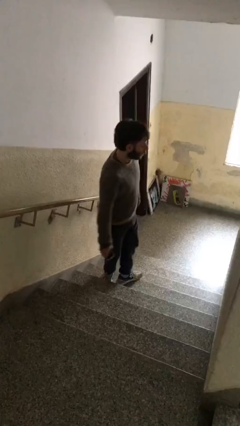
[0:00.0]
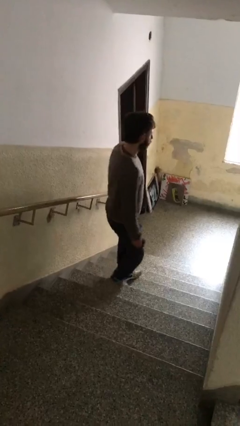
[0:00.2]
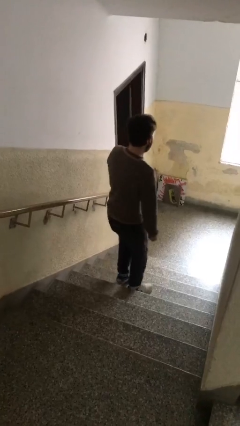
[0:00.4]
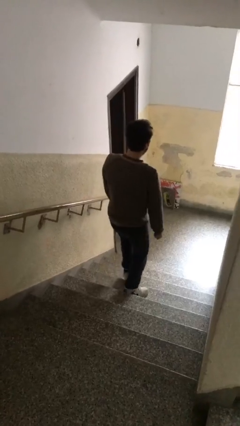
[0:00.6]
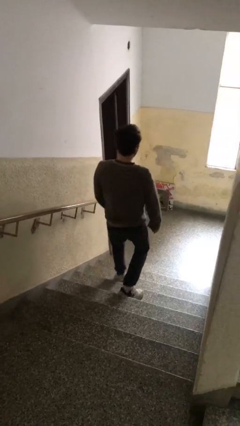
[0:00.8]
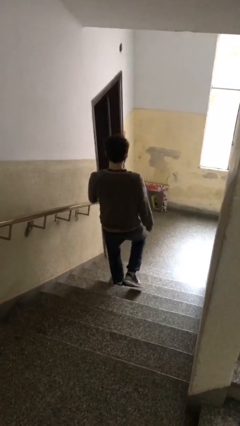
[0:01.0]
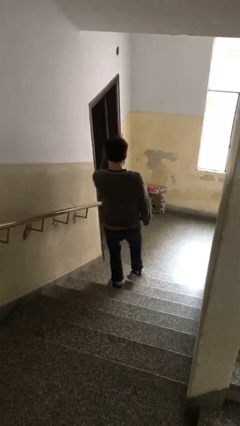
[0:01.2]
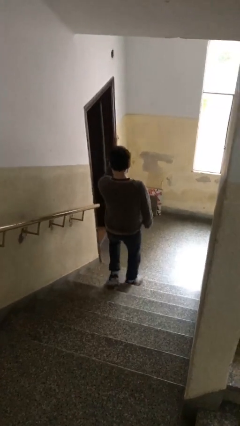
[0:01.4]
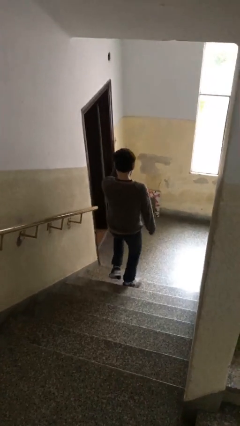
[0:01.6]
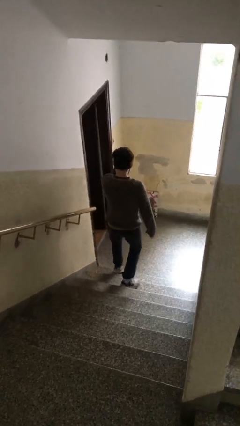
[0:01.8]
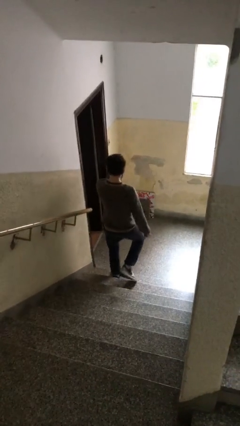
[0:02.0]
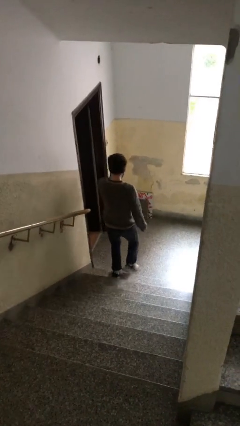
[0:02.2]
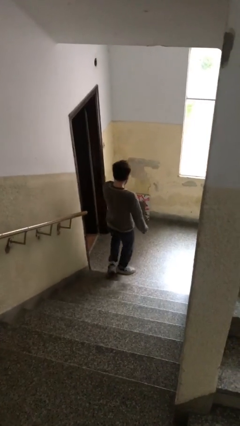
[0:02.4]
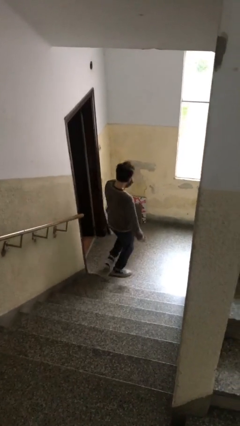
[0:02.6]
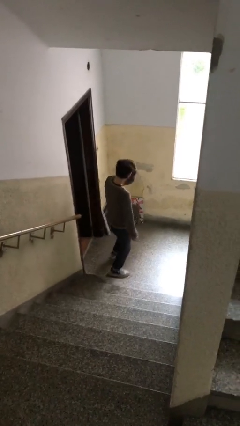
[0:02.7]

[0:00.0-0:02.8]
person climbs down stairs

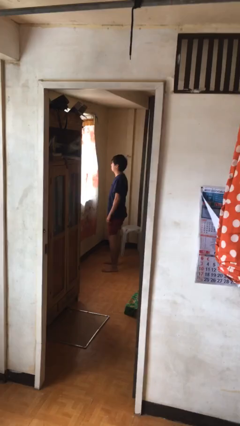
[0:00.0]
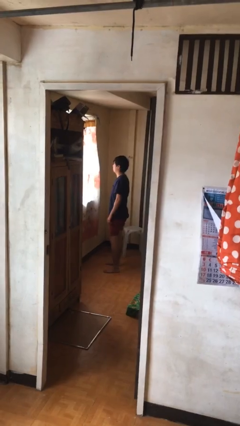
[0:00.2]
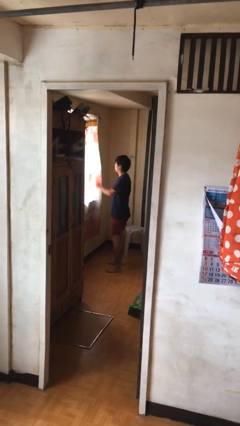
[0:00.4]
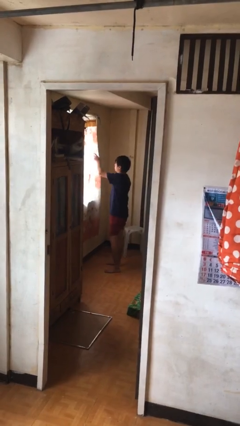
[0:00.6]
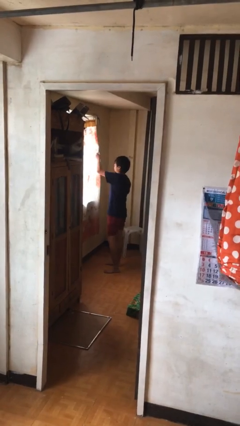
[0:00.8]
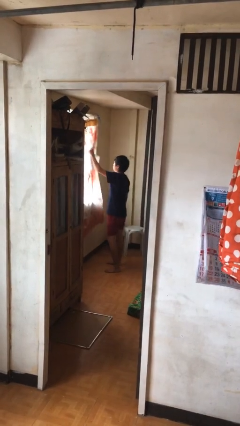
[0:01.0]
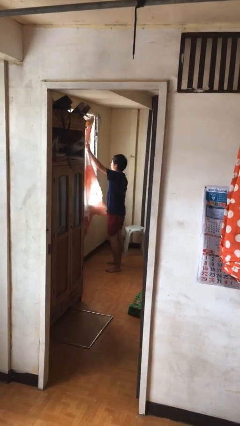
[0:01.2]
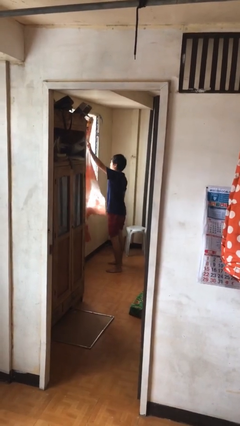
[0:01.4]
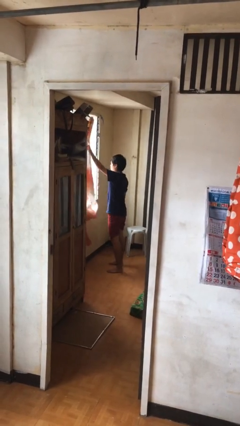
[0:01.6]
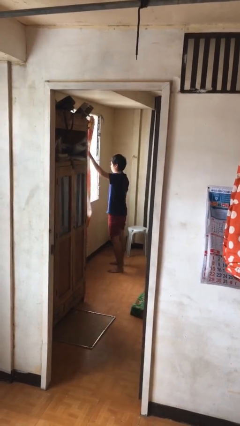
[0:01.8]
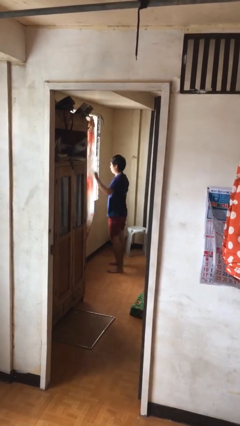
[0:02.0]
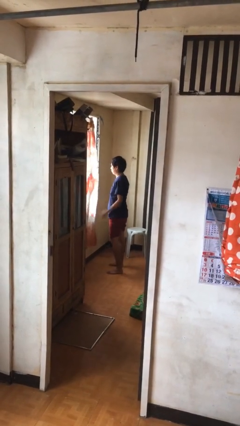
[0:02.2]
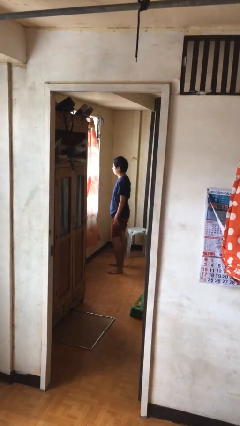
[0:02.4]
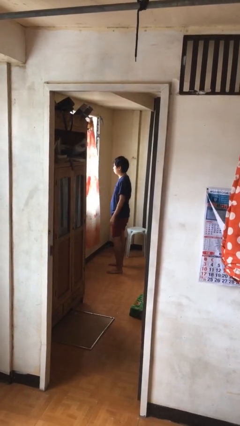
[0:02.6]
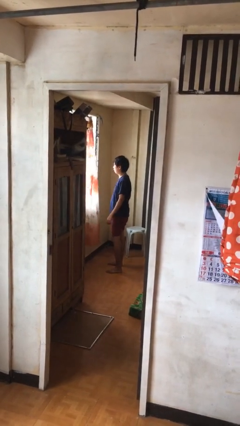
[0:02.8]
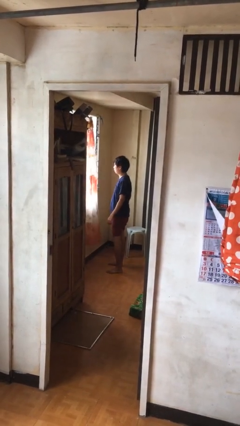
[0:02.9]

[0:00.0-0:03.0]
person opens curtains

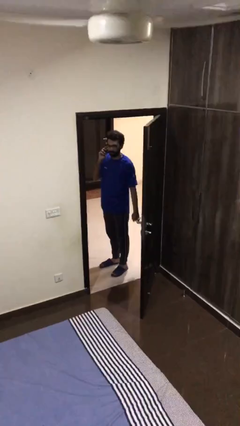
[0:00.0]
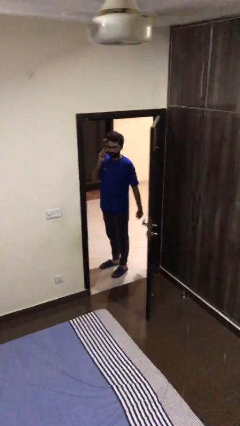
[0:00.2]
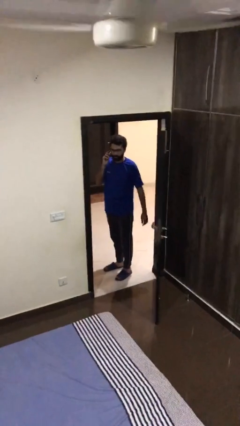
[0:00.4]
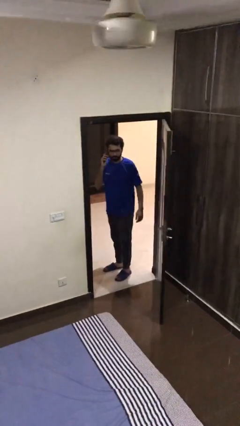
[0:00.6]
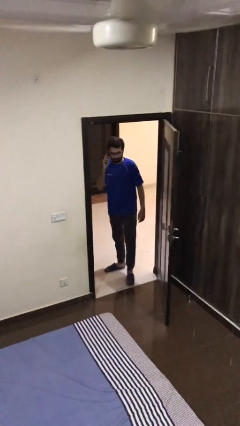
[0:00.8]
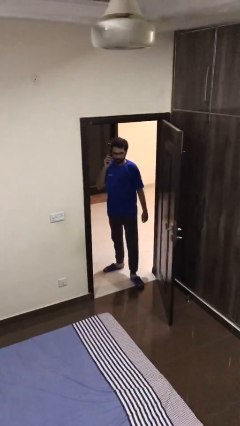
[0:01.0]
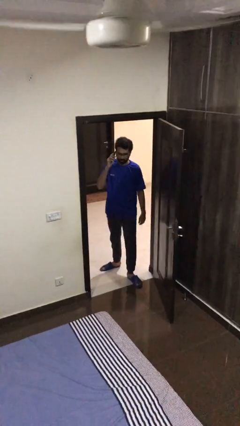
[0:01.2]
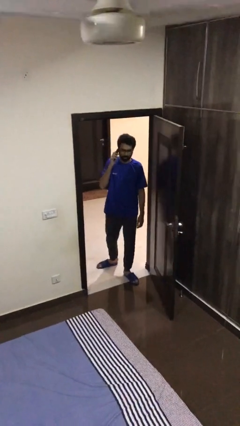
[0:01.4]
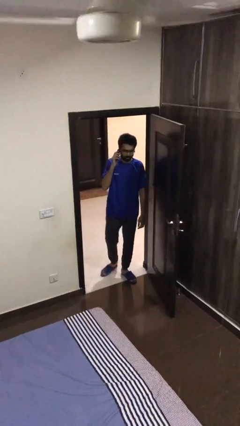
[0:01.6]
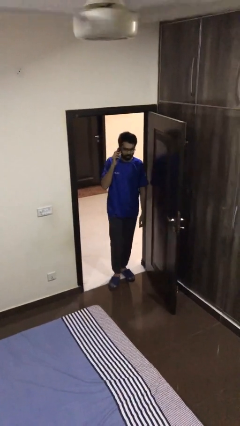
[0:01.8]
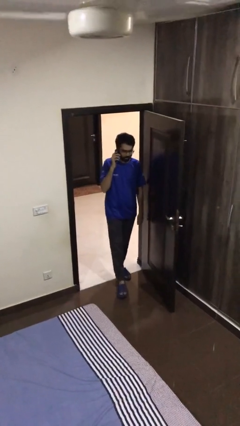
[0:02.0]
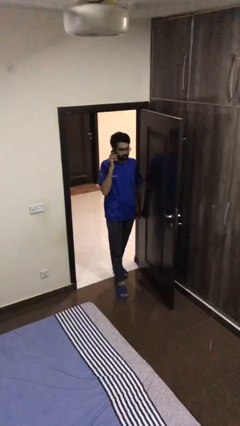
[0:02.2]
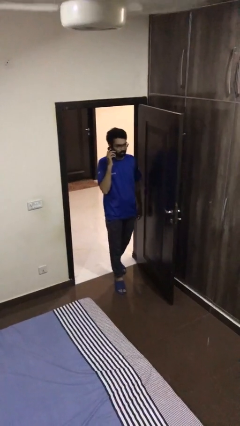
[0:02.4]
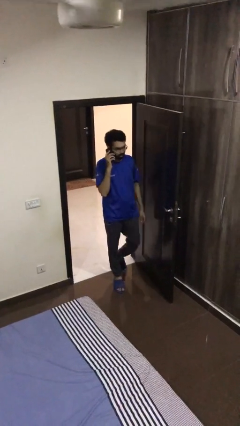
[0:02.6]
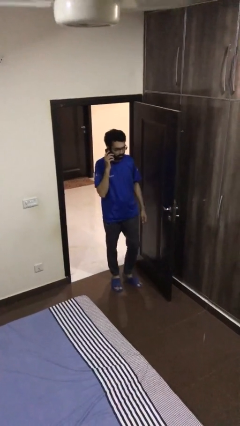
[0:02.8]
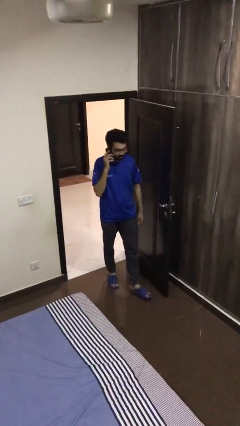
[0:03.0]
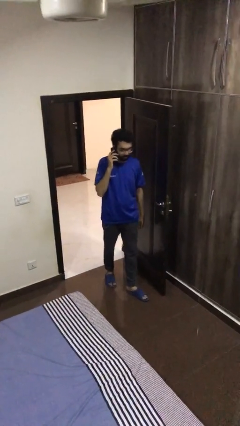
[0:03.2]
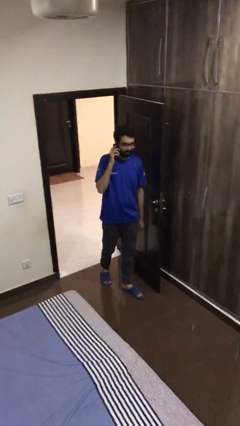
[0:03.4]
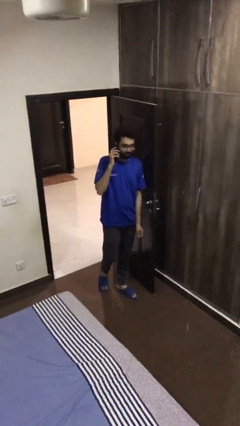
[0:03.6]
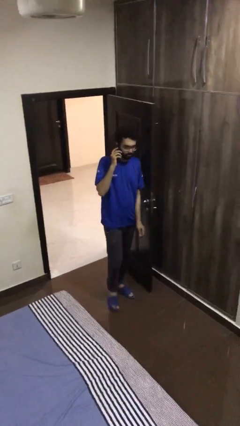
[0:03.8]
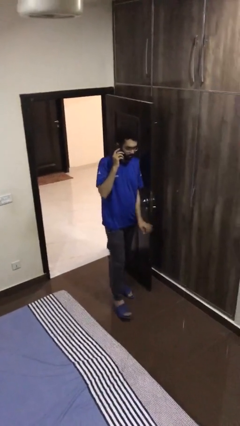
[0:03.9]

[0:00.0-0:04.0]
person enters scene through structure

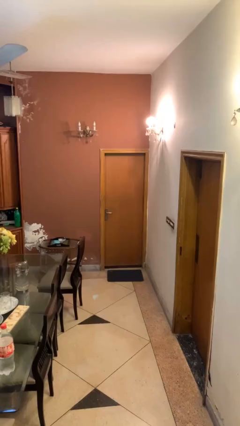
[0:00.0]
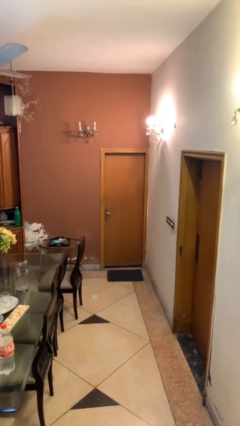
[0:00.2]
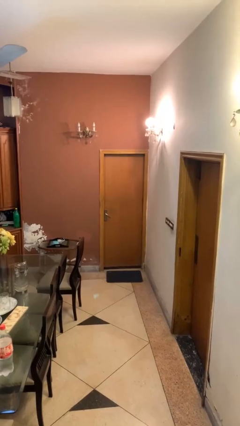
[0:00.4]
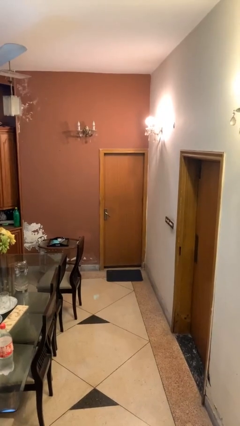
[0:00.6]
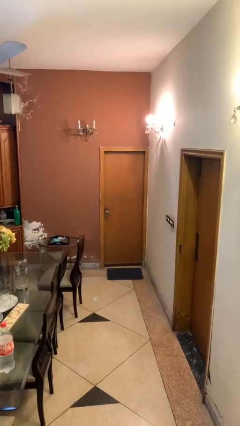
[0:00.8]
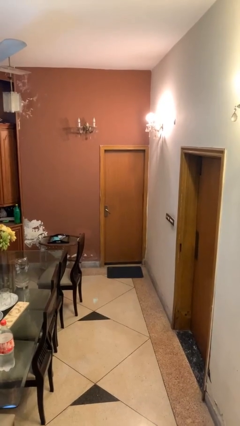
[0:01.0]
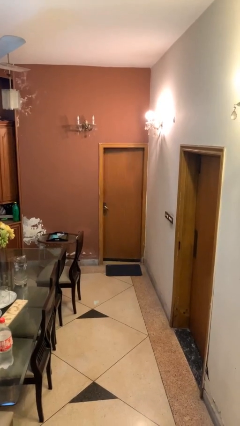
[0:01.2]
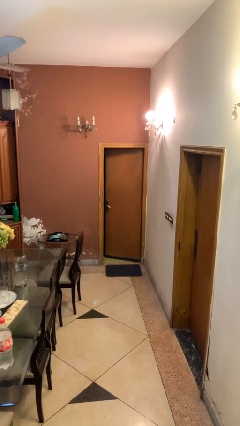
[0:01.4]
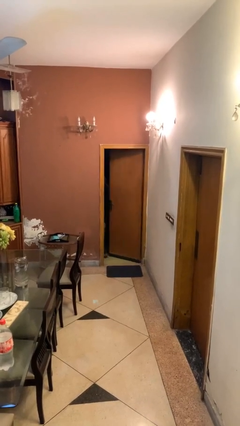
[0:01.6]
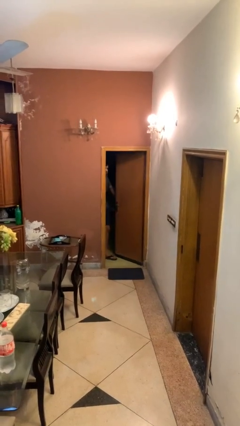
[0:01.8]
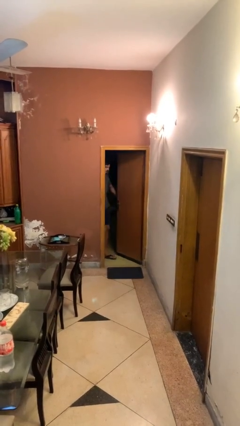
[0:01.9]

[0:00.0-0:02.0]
person opens facility door

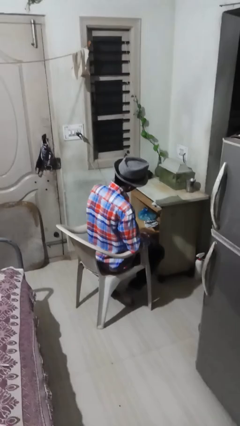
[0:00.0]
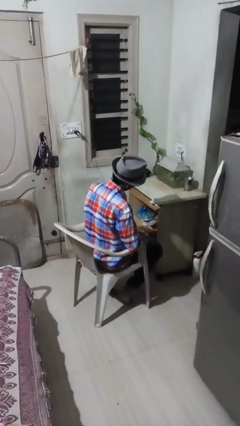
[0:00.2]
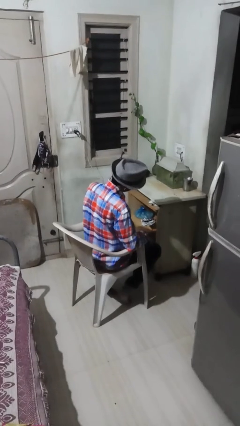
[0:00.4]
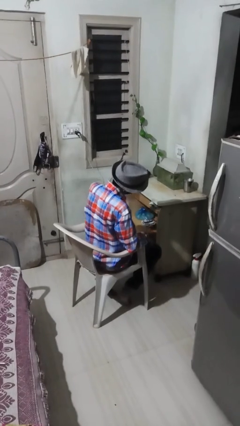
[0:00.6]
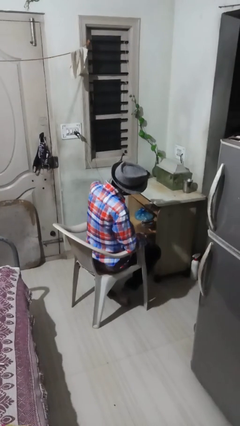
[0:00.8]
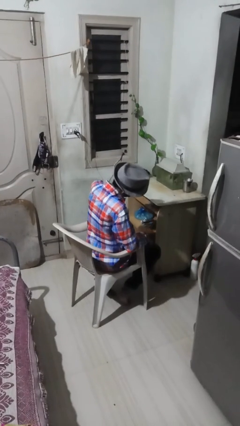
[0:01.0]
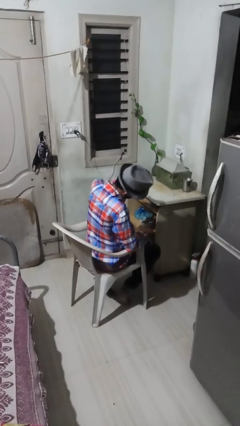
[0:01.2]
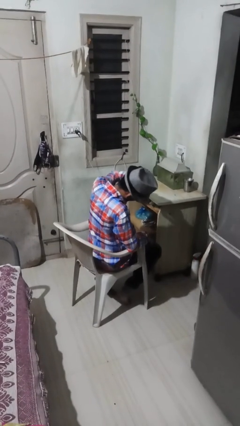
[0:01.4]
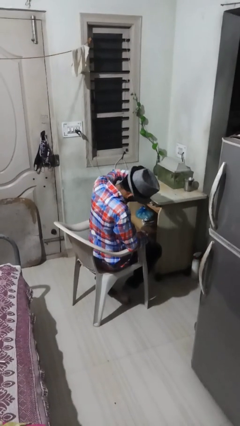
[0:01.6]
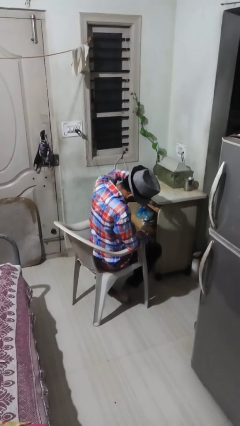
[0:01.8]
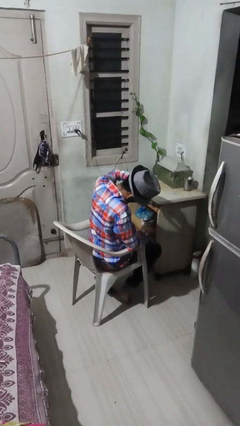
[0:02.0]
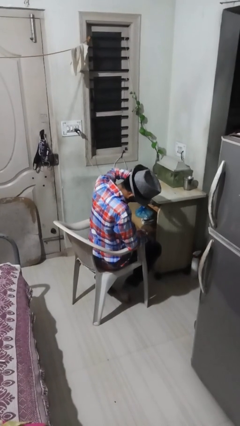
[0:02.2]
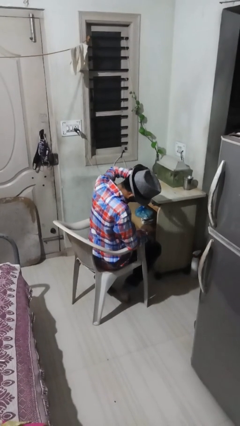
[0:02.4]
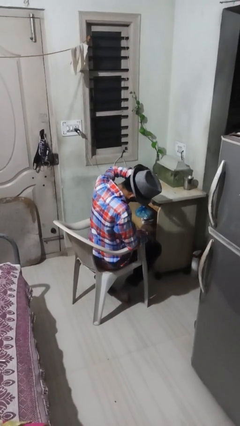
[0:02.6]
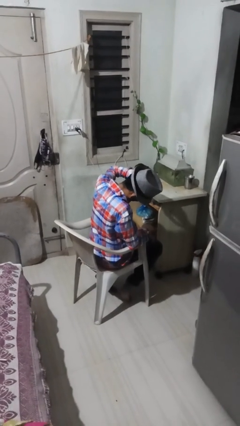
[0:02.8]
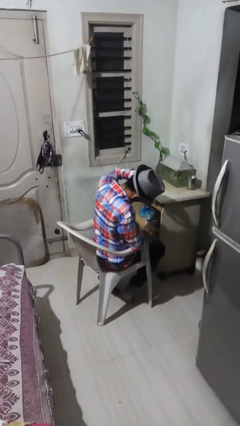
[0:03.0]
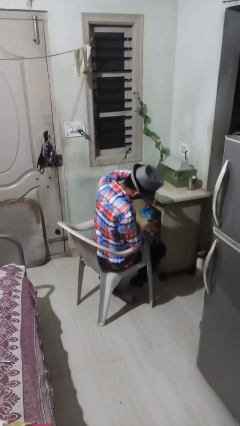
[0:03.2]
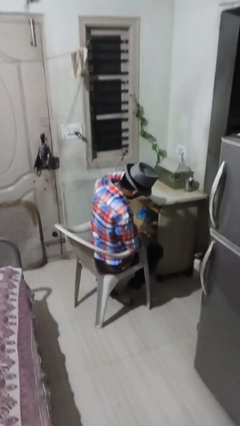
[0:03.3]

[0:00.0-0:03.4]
person puts fingers in ear

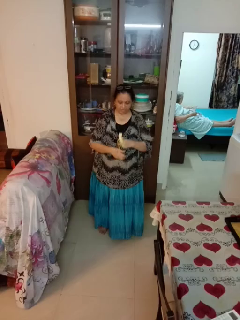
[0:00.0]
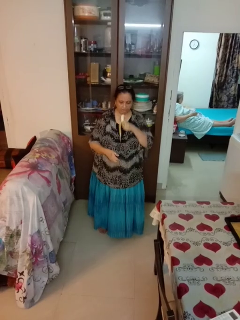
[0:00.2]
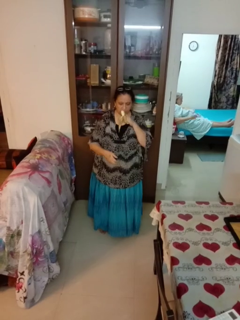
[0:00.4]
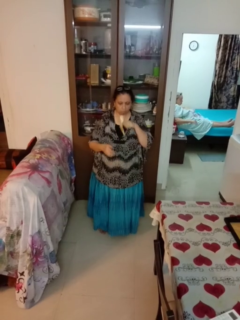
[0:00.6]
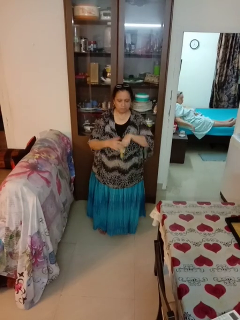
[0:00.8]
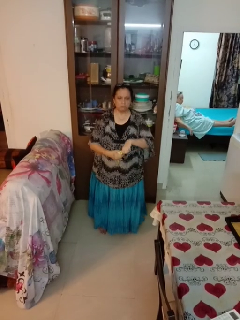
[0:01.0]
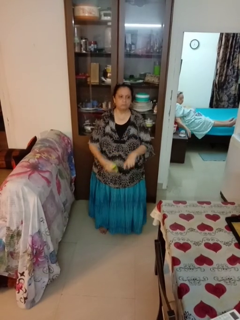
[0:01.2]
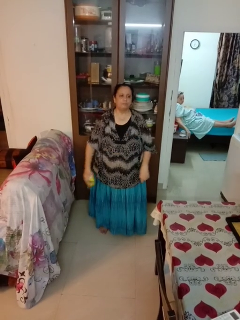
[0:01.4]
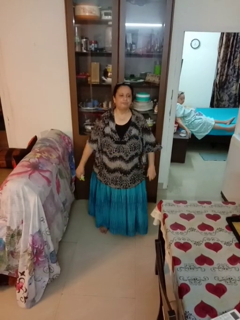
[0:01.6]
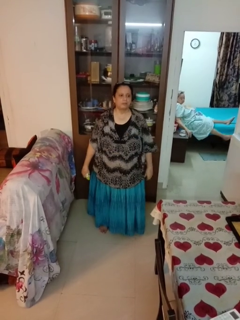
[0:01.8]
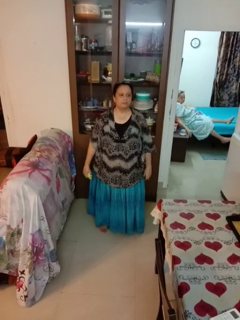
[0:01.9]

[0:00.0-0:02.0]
person eats banana

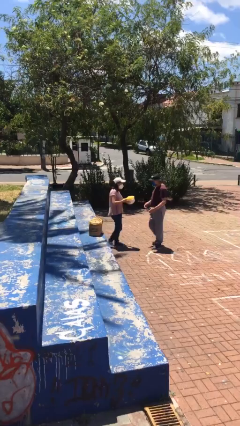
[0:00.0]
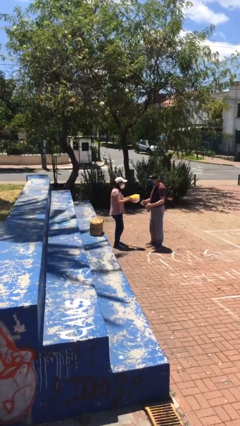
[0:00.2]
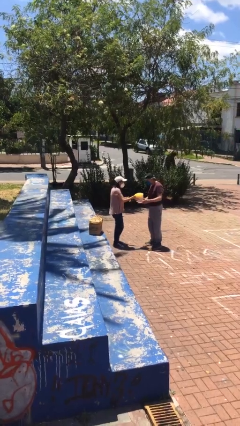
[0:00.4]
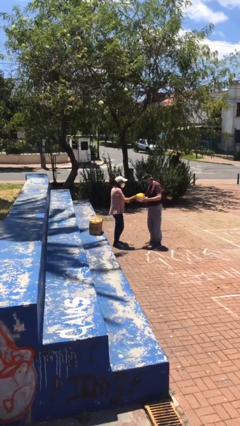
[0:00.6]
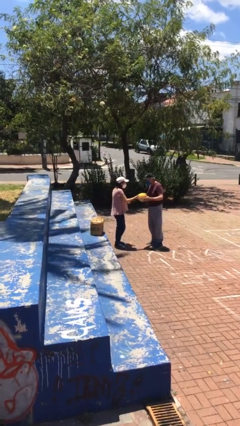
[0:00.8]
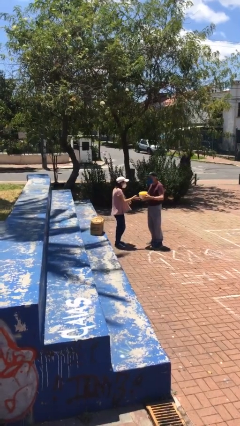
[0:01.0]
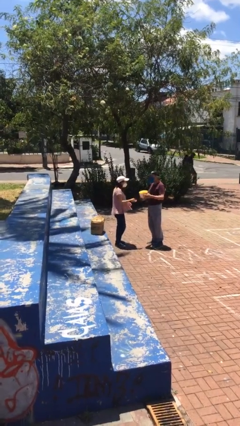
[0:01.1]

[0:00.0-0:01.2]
person transfers object to person
